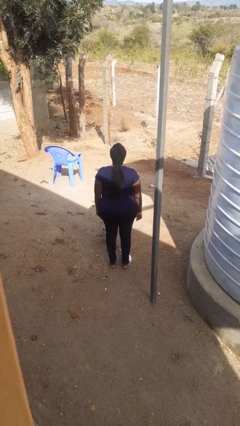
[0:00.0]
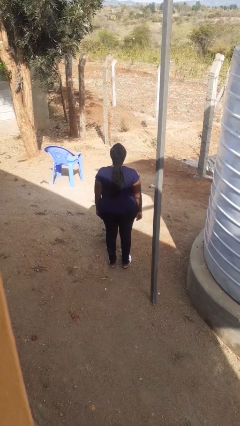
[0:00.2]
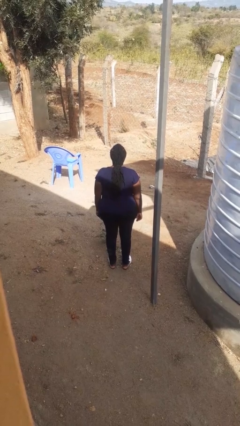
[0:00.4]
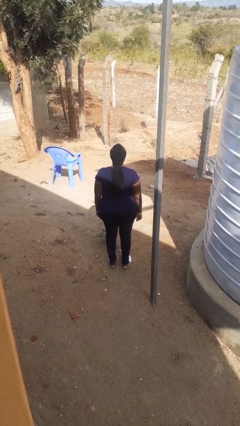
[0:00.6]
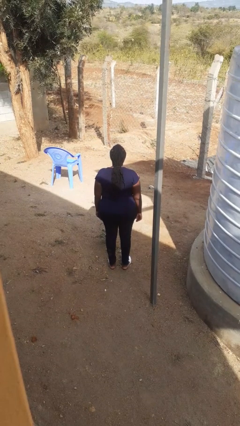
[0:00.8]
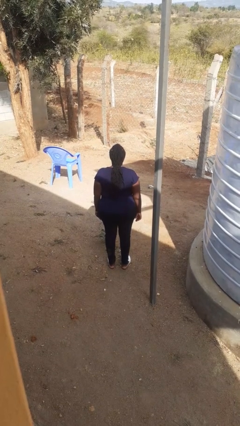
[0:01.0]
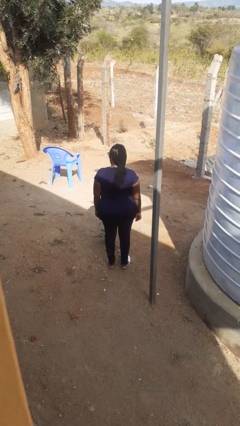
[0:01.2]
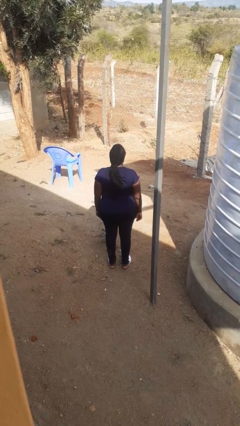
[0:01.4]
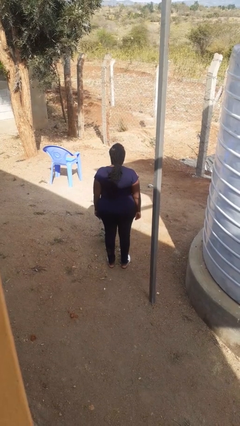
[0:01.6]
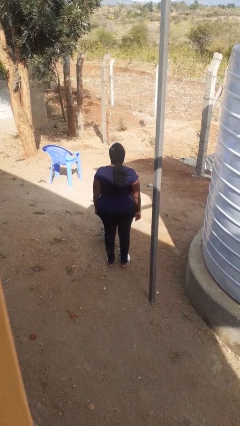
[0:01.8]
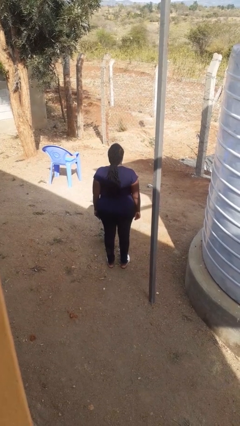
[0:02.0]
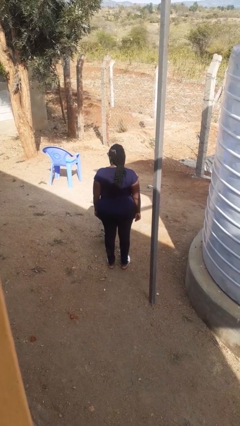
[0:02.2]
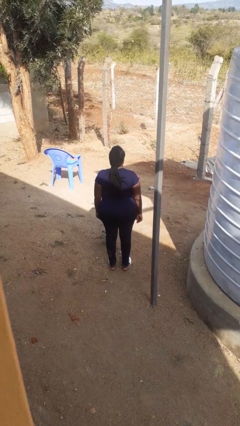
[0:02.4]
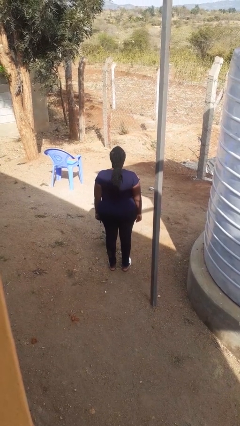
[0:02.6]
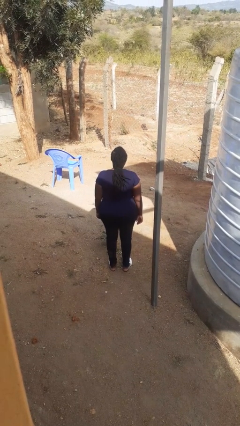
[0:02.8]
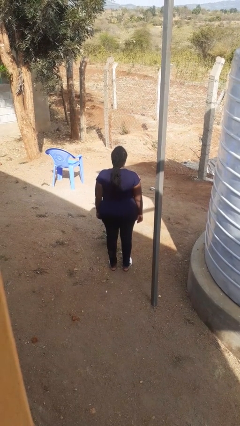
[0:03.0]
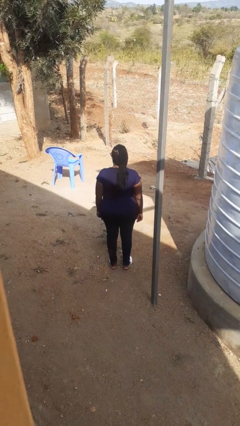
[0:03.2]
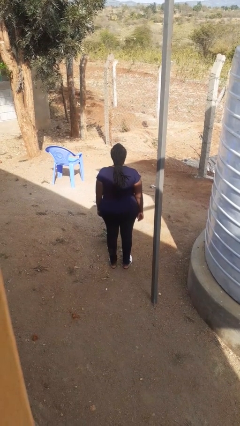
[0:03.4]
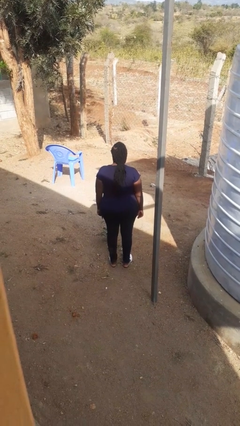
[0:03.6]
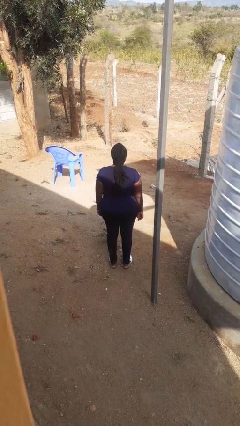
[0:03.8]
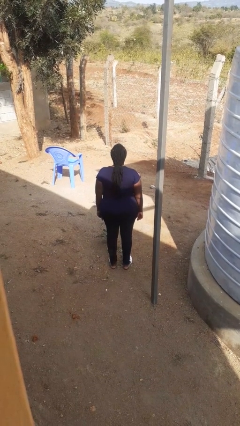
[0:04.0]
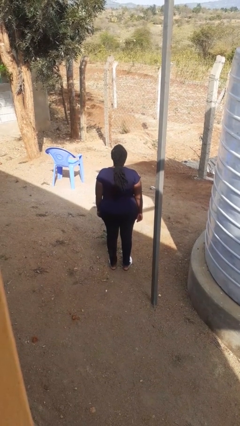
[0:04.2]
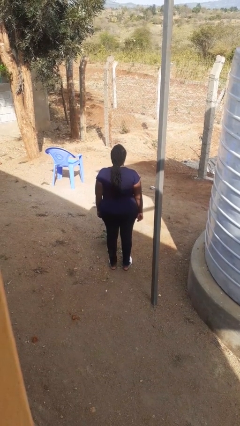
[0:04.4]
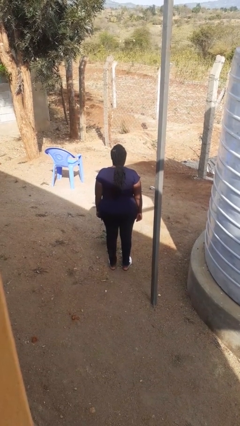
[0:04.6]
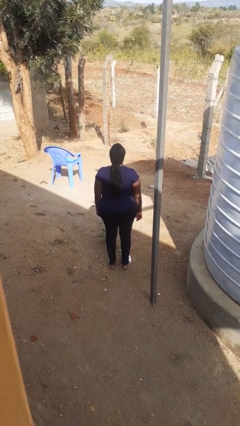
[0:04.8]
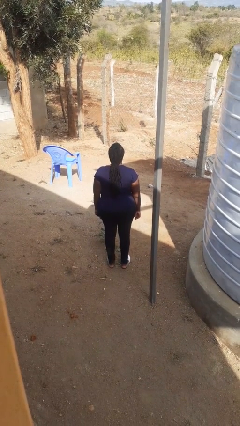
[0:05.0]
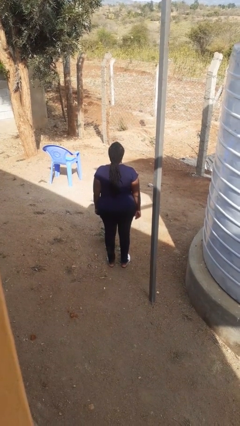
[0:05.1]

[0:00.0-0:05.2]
person shakes head

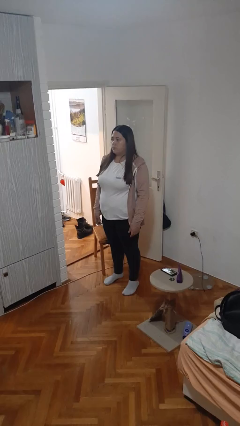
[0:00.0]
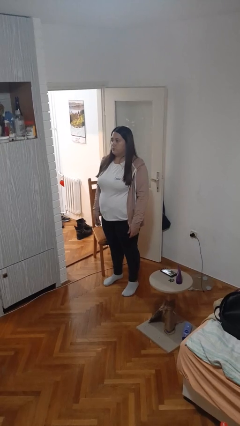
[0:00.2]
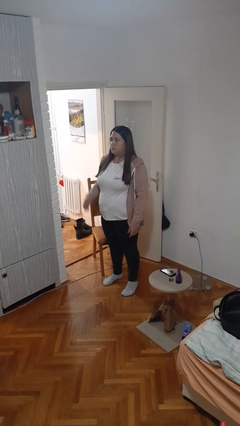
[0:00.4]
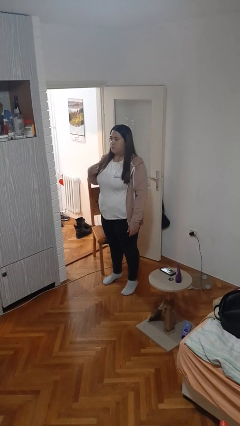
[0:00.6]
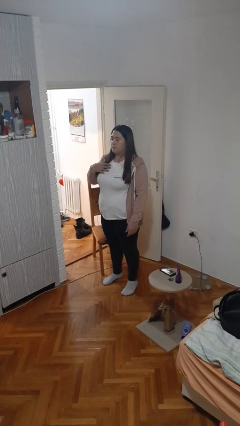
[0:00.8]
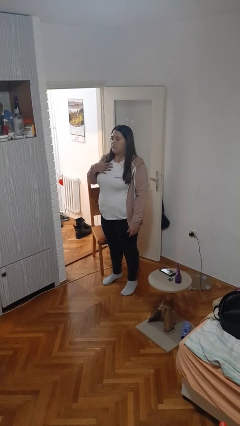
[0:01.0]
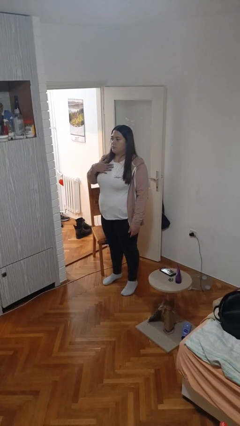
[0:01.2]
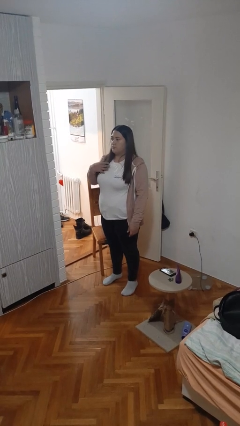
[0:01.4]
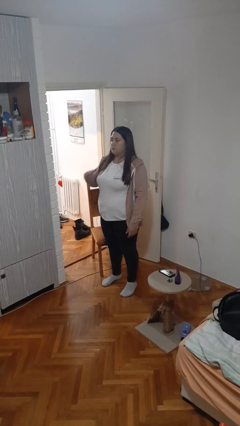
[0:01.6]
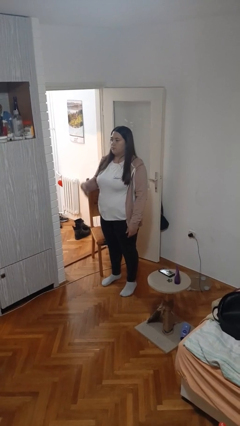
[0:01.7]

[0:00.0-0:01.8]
person drums on chest

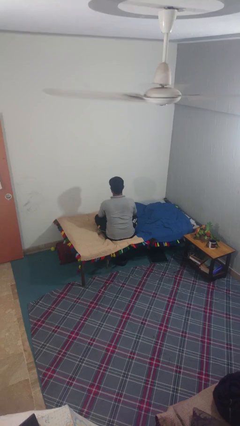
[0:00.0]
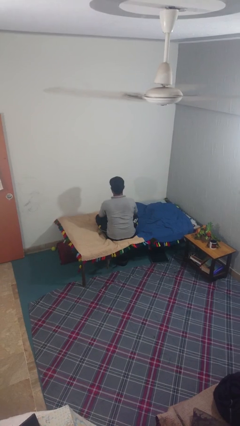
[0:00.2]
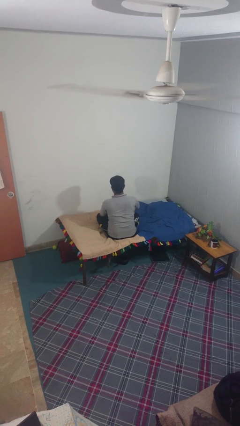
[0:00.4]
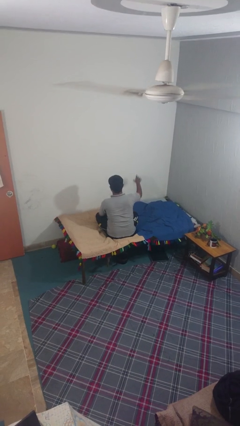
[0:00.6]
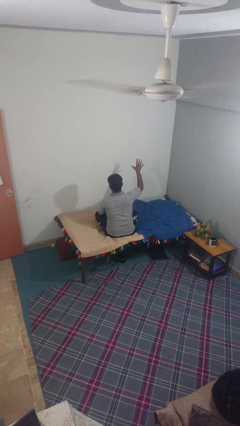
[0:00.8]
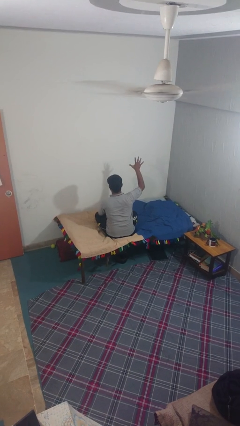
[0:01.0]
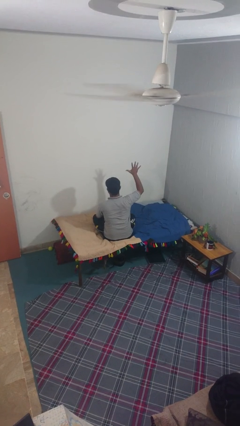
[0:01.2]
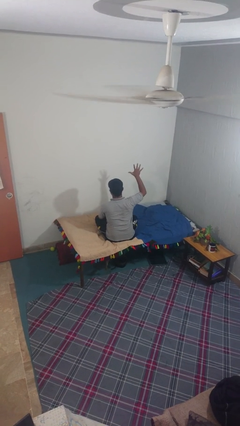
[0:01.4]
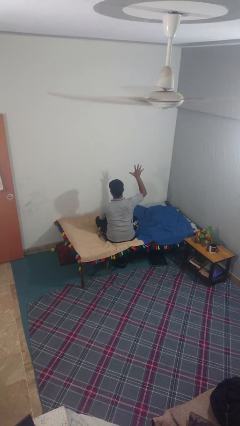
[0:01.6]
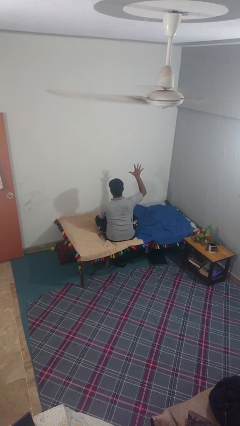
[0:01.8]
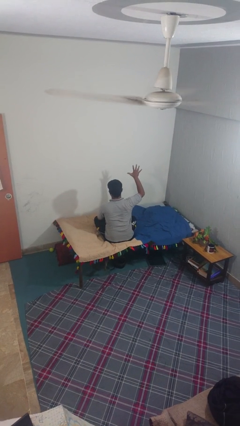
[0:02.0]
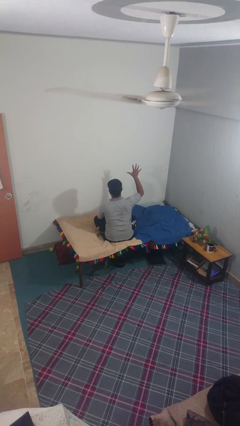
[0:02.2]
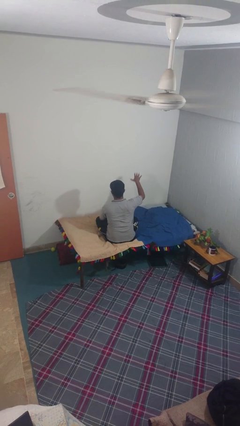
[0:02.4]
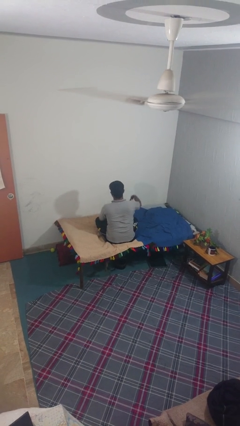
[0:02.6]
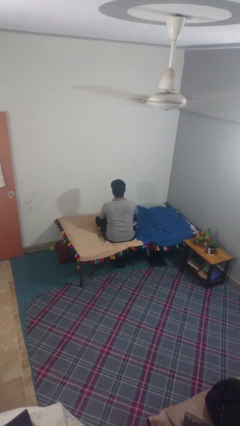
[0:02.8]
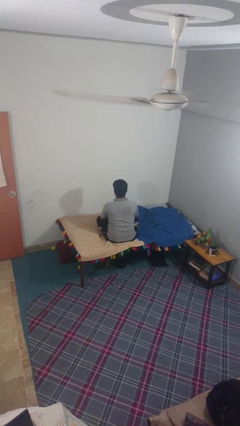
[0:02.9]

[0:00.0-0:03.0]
person gestures number five

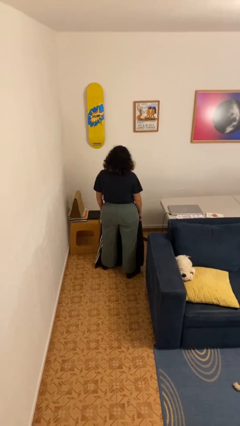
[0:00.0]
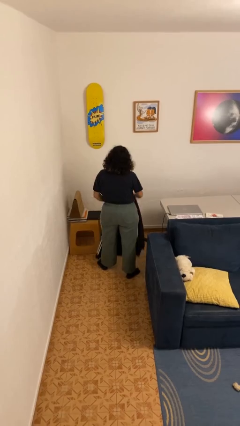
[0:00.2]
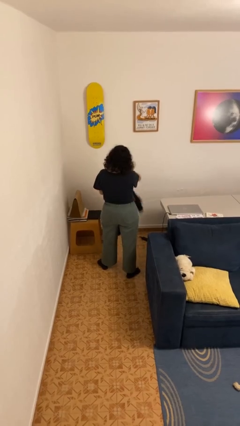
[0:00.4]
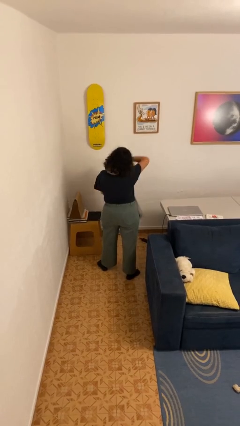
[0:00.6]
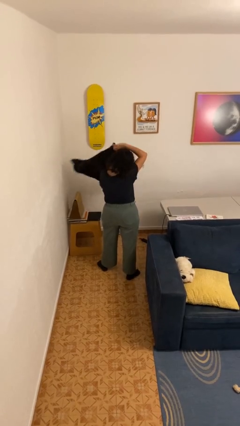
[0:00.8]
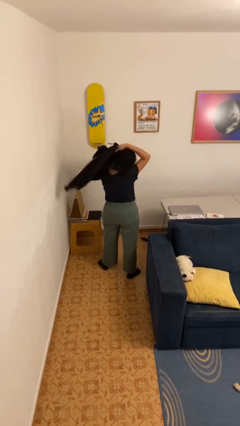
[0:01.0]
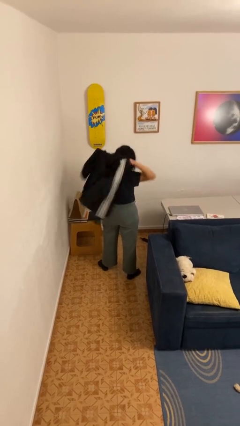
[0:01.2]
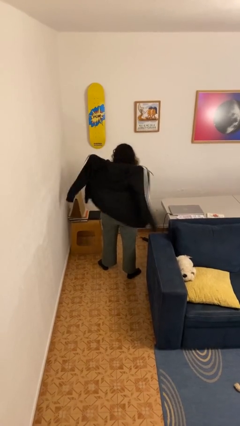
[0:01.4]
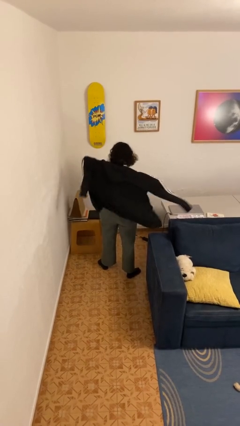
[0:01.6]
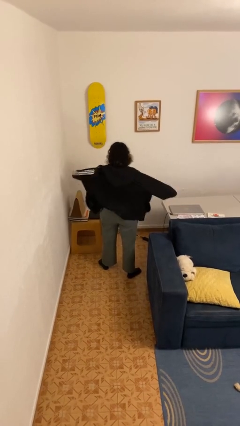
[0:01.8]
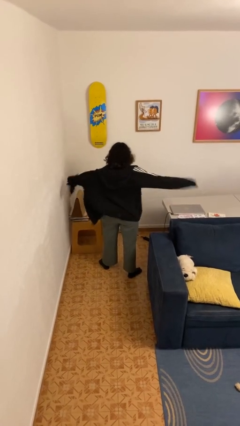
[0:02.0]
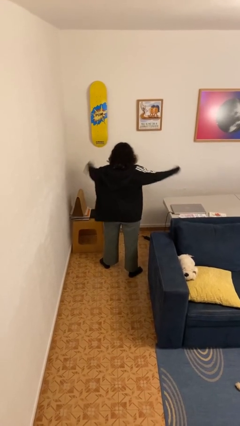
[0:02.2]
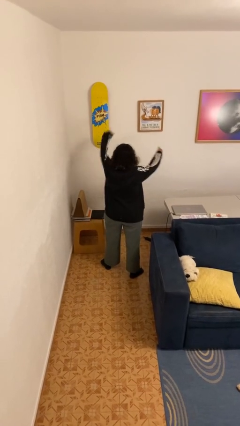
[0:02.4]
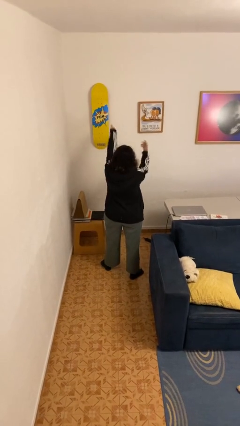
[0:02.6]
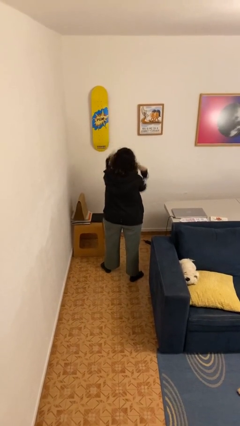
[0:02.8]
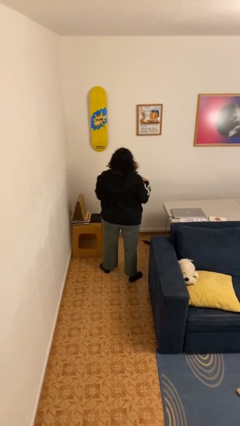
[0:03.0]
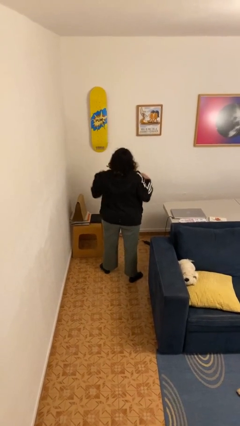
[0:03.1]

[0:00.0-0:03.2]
person puts on hoodie

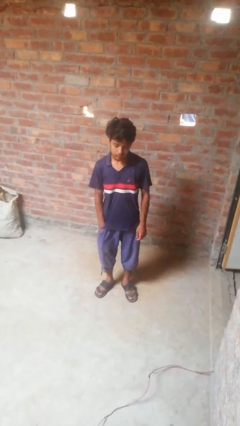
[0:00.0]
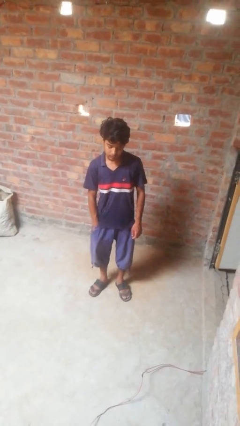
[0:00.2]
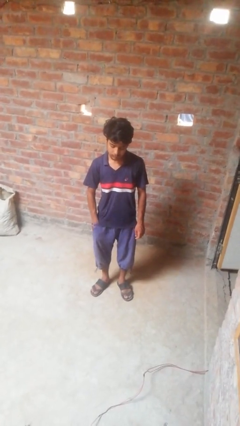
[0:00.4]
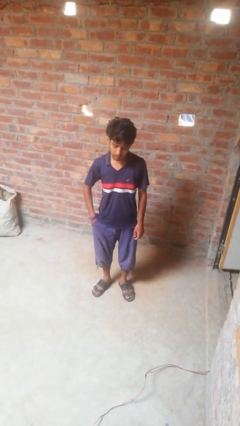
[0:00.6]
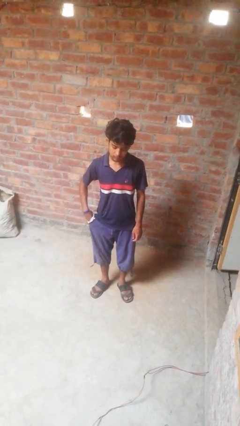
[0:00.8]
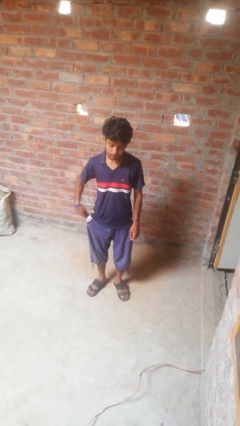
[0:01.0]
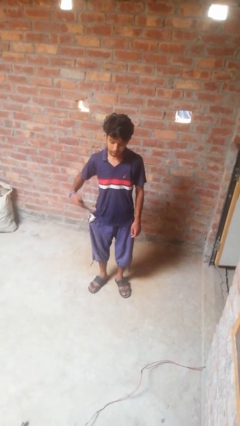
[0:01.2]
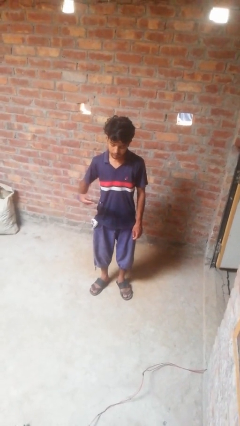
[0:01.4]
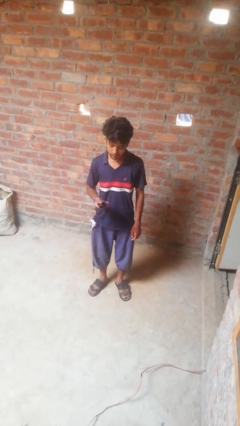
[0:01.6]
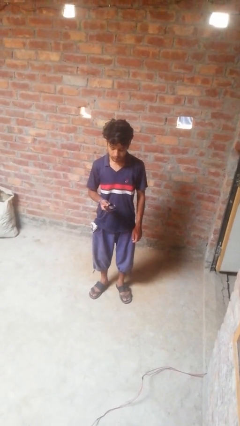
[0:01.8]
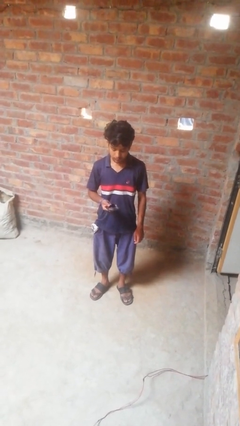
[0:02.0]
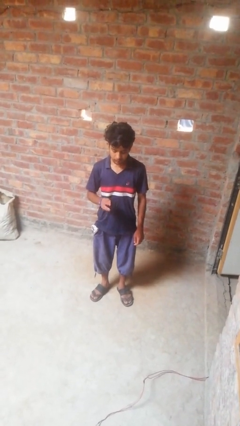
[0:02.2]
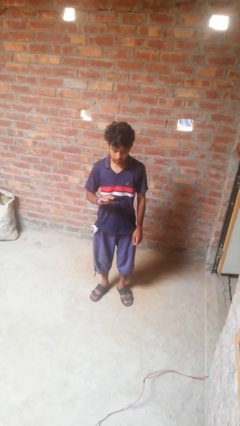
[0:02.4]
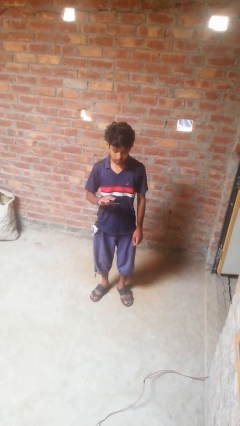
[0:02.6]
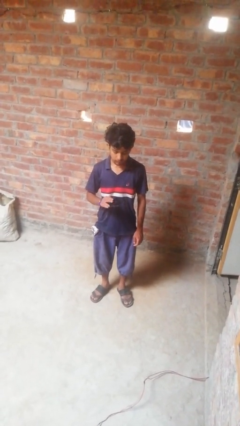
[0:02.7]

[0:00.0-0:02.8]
person takes phone from pocket

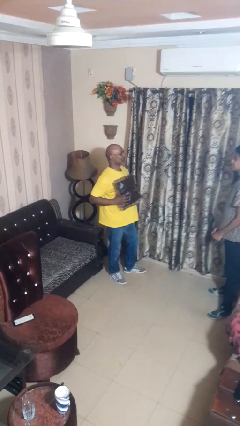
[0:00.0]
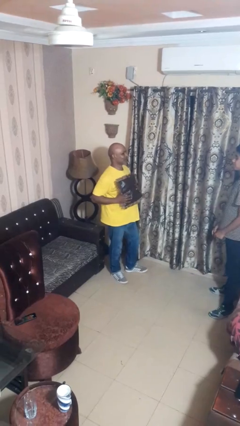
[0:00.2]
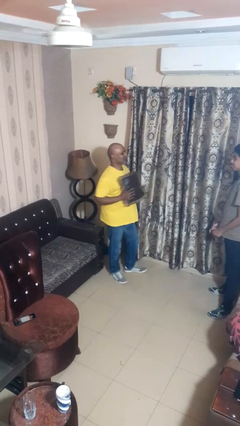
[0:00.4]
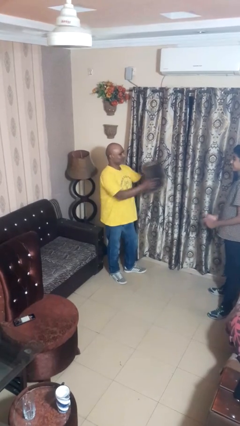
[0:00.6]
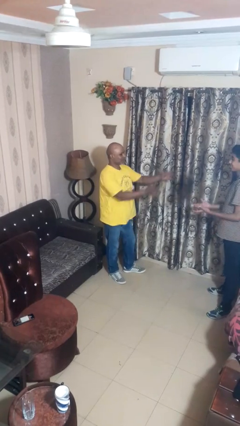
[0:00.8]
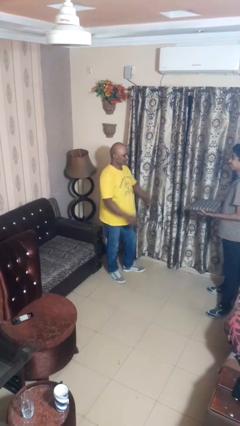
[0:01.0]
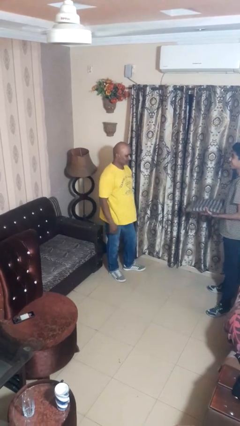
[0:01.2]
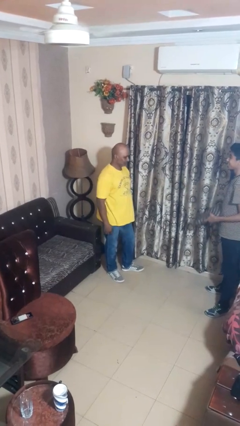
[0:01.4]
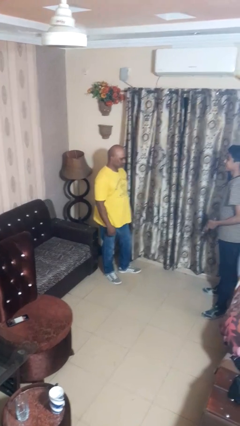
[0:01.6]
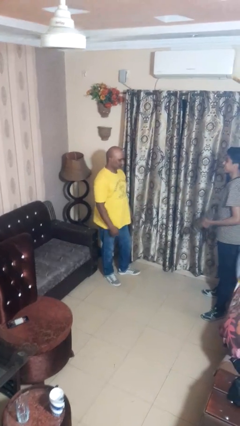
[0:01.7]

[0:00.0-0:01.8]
person throws object to person

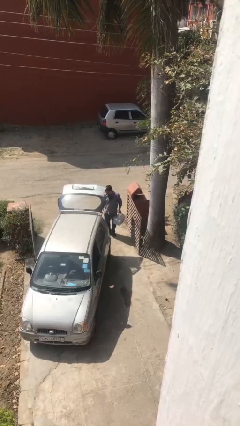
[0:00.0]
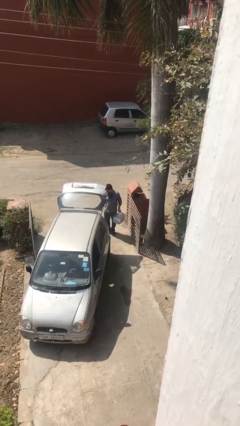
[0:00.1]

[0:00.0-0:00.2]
person loads car
